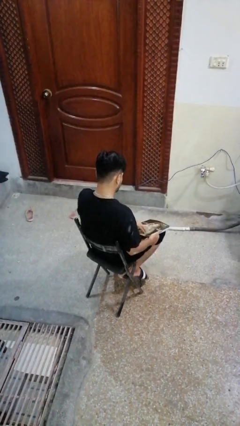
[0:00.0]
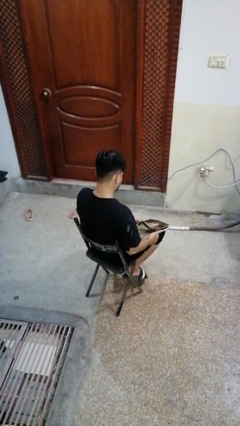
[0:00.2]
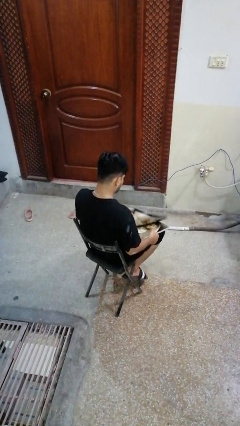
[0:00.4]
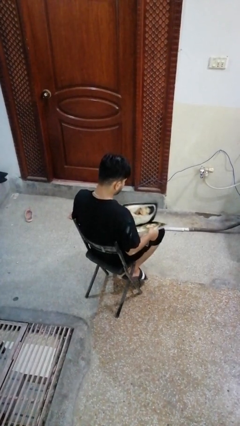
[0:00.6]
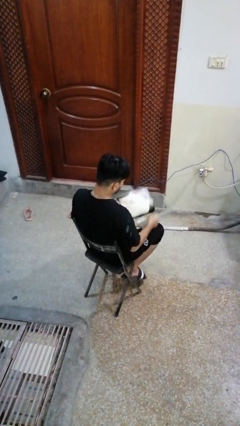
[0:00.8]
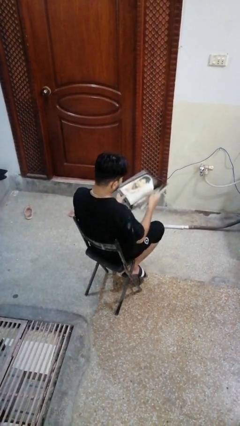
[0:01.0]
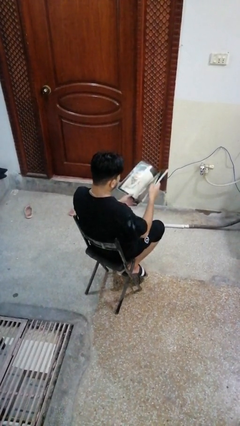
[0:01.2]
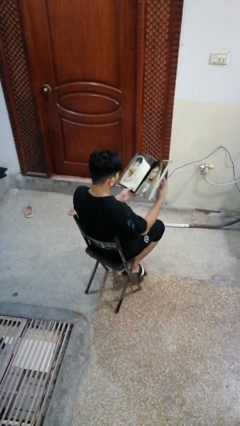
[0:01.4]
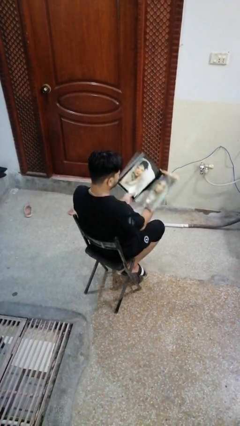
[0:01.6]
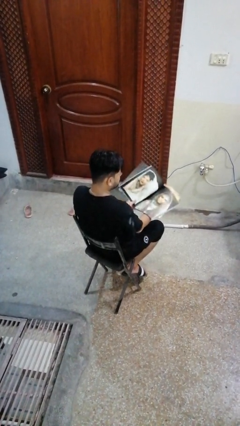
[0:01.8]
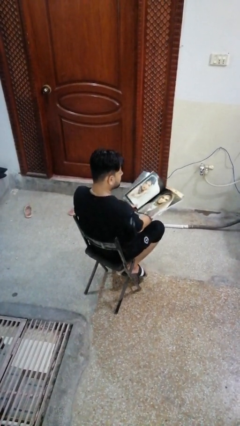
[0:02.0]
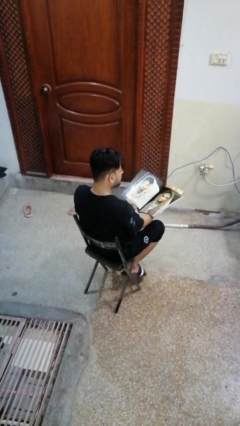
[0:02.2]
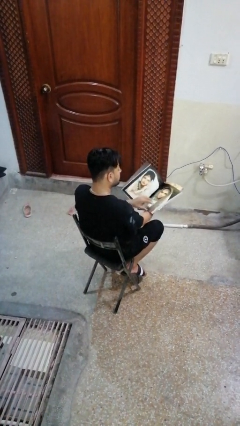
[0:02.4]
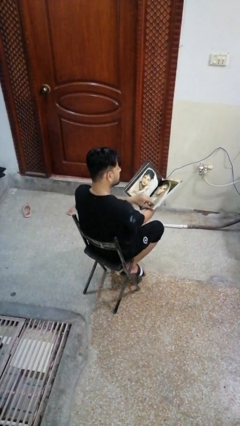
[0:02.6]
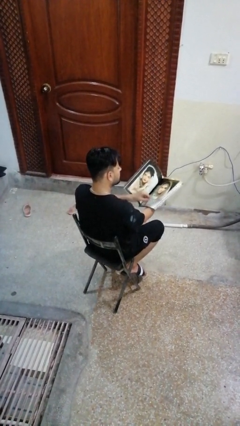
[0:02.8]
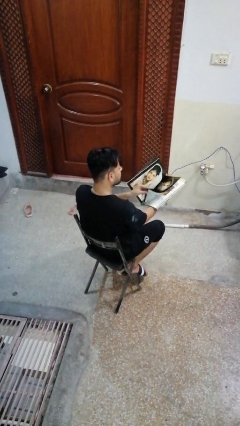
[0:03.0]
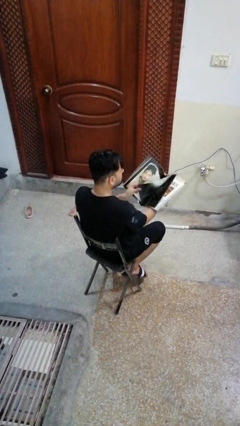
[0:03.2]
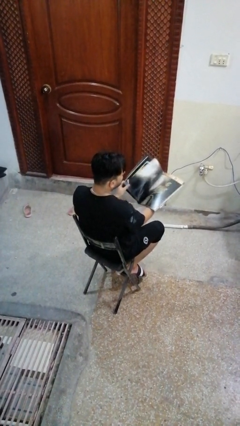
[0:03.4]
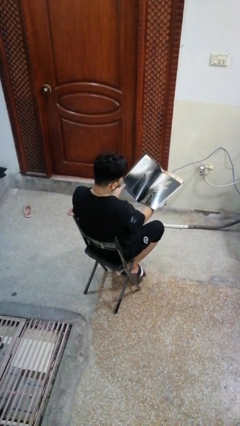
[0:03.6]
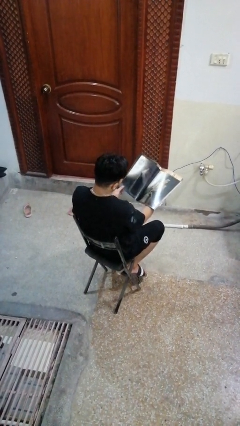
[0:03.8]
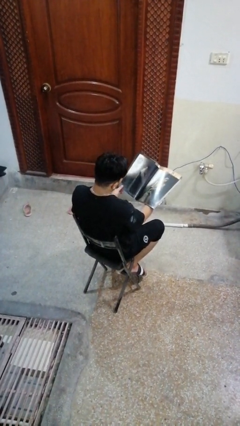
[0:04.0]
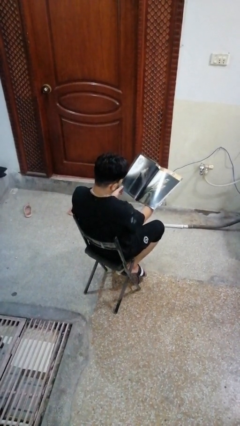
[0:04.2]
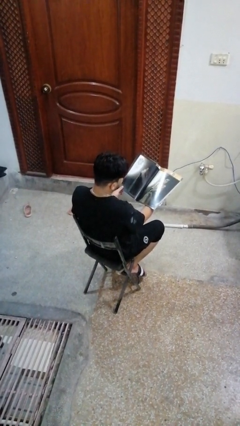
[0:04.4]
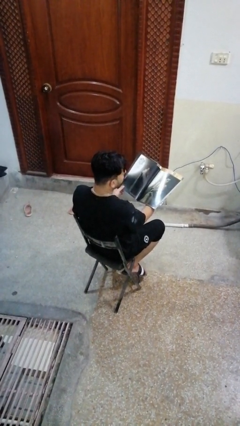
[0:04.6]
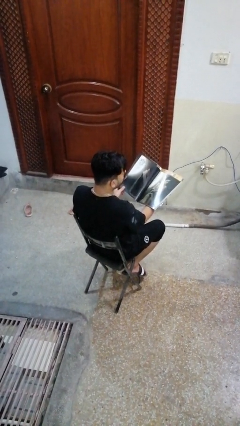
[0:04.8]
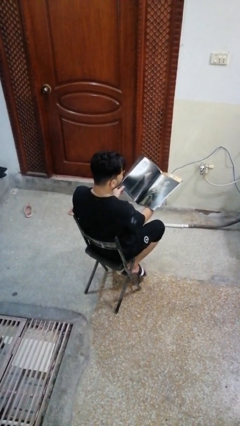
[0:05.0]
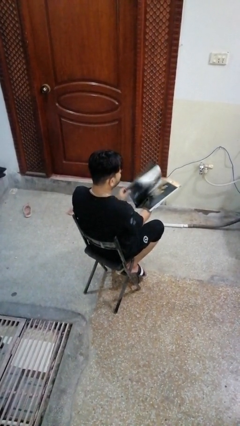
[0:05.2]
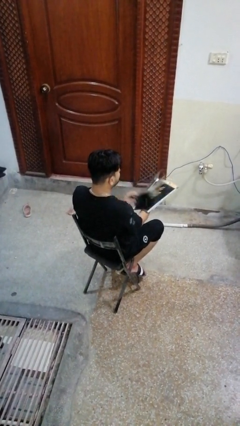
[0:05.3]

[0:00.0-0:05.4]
person reads magazine

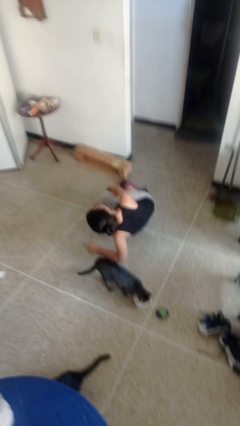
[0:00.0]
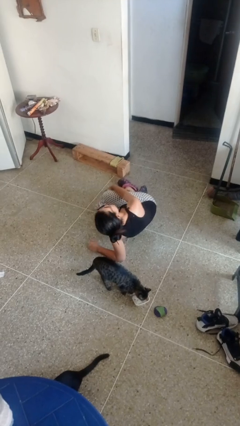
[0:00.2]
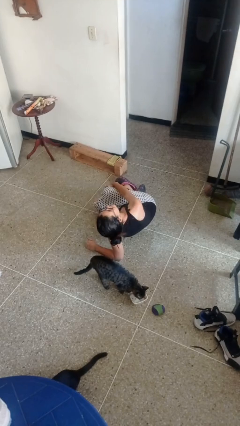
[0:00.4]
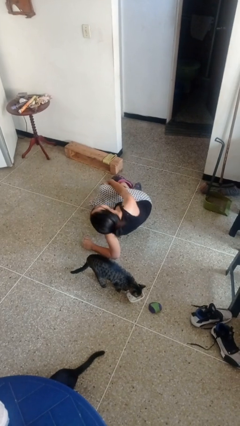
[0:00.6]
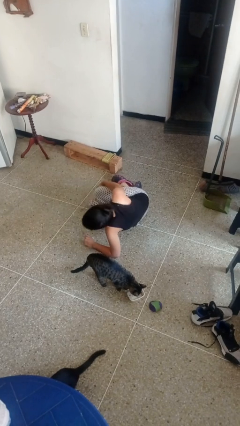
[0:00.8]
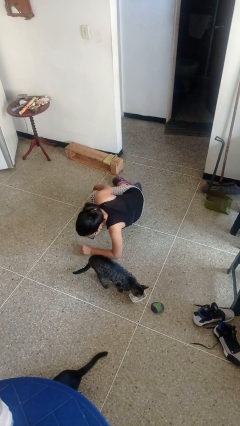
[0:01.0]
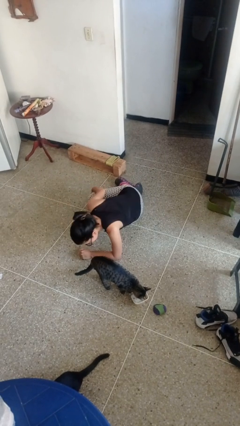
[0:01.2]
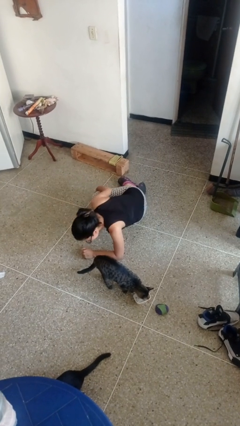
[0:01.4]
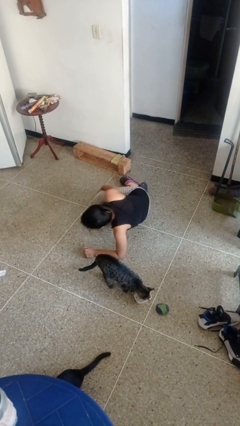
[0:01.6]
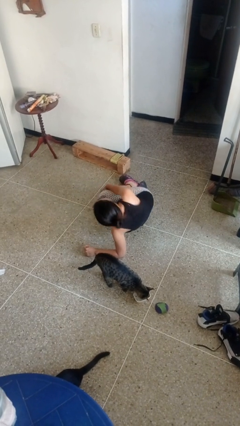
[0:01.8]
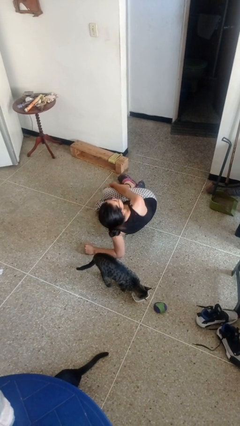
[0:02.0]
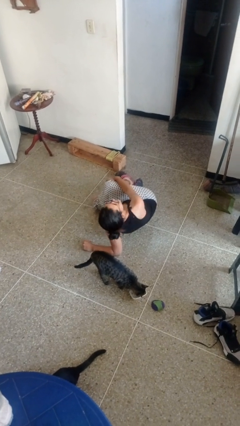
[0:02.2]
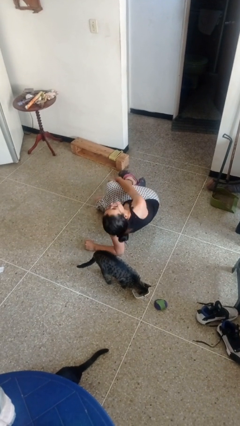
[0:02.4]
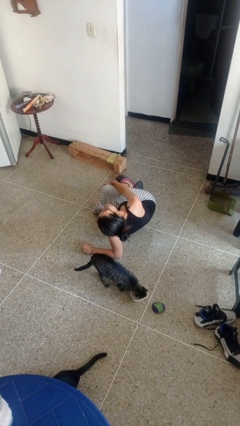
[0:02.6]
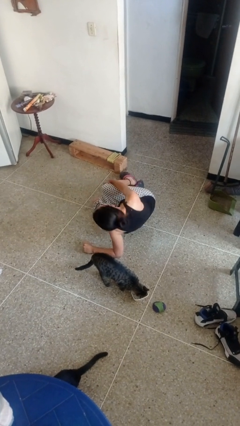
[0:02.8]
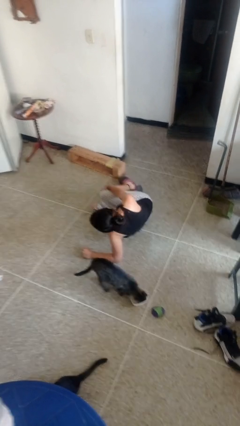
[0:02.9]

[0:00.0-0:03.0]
person lies down on floor

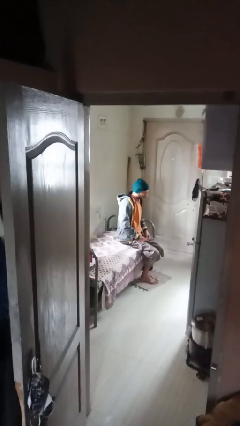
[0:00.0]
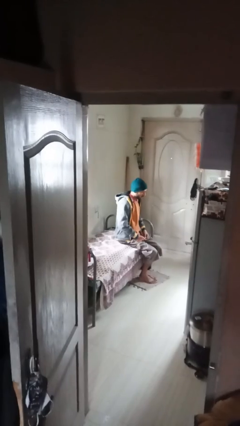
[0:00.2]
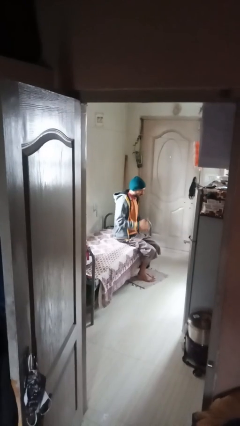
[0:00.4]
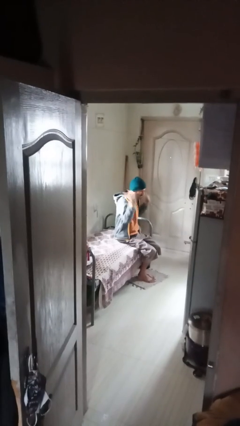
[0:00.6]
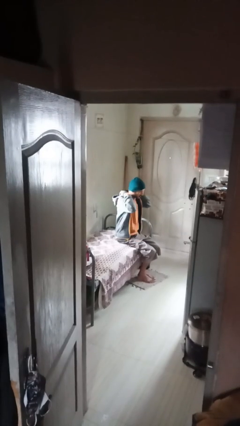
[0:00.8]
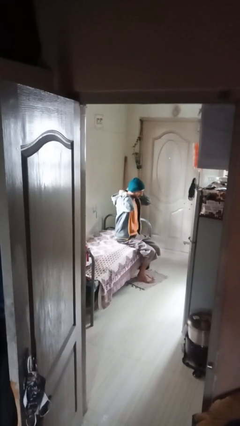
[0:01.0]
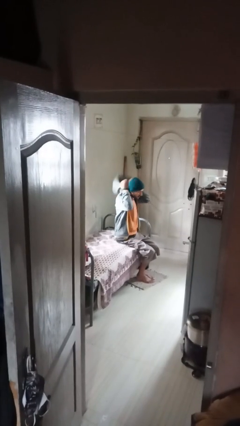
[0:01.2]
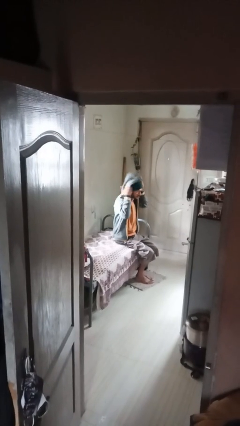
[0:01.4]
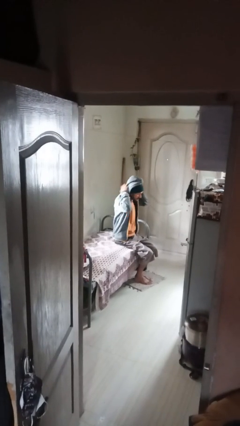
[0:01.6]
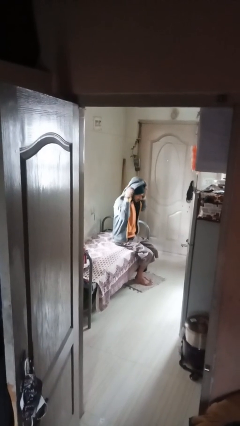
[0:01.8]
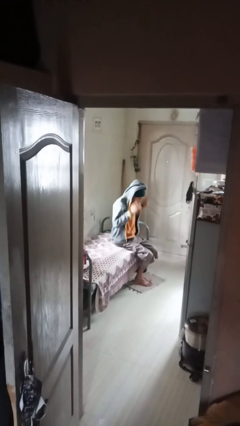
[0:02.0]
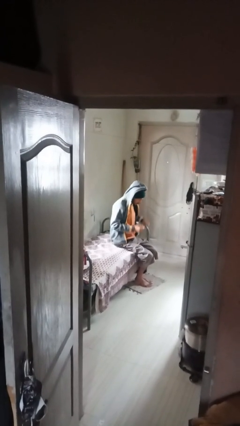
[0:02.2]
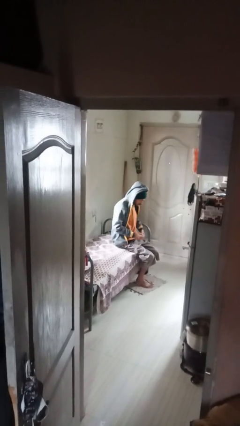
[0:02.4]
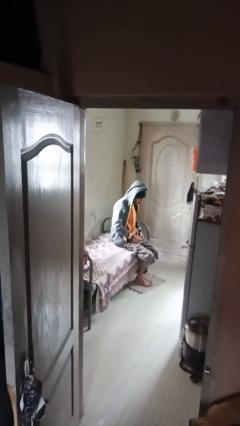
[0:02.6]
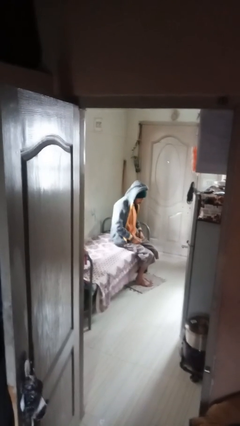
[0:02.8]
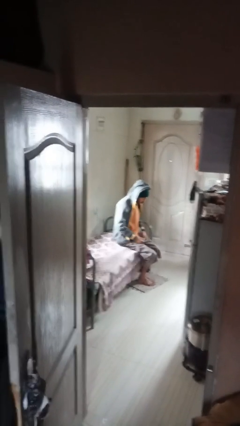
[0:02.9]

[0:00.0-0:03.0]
person puts on hoodie

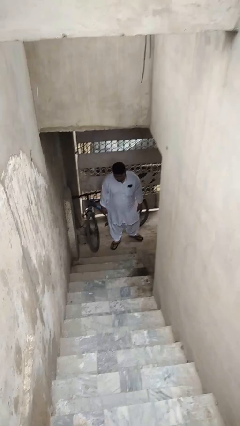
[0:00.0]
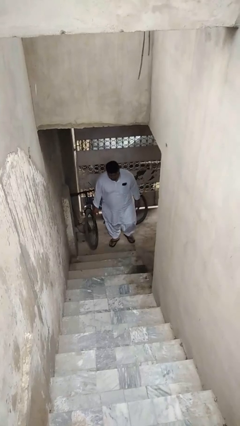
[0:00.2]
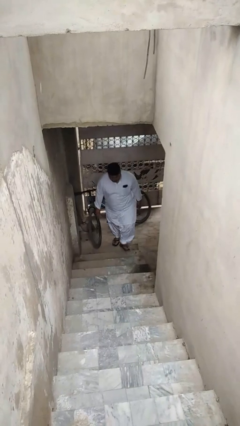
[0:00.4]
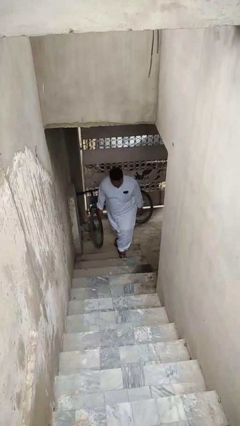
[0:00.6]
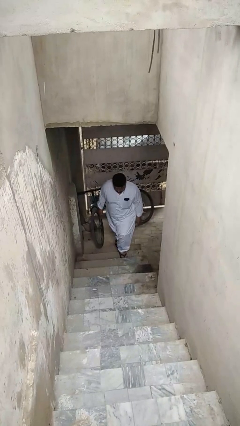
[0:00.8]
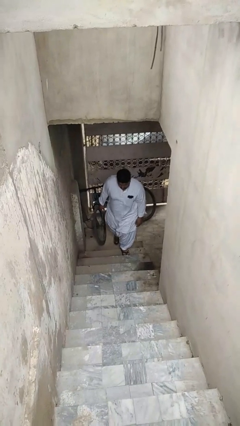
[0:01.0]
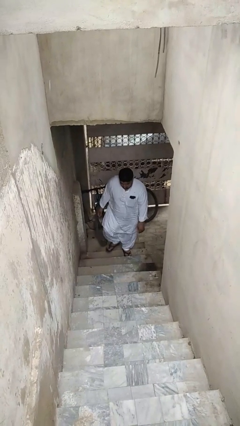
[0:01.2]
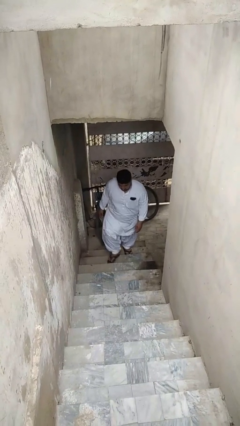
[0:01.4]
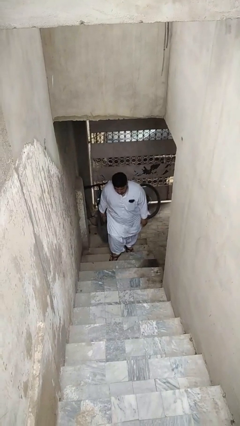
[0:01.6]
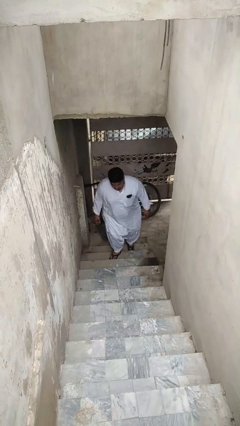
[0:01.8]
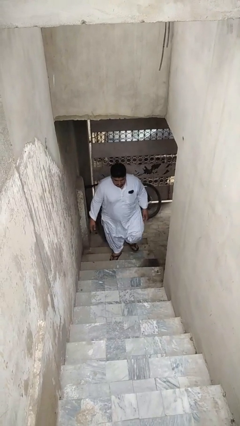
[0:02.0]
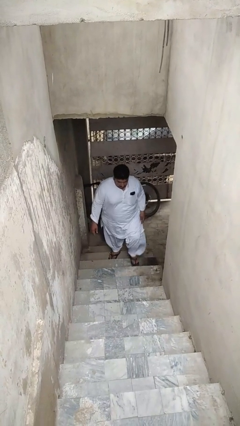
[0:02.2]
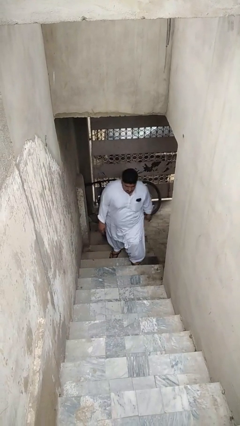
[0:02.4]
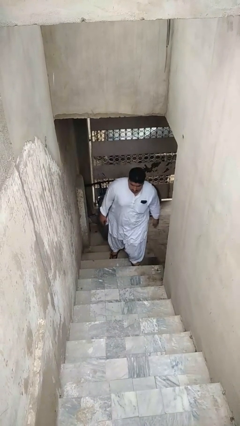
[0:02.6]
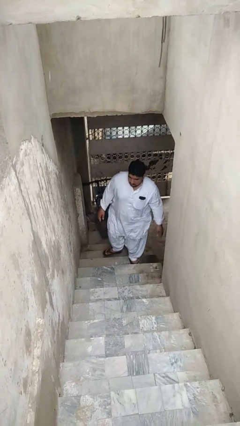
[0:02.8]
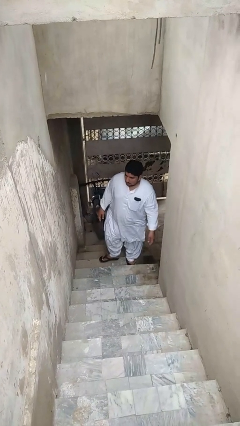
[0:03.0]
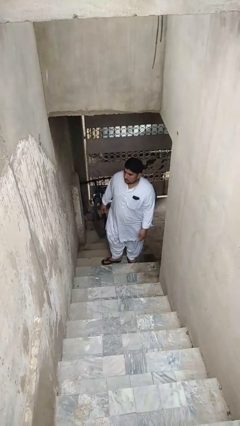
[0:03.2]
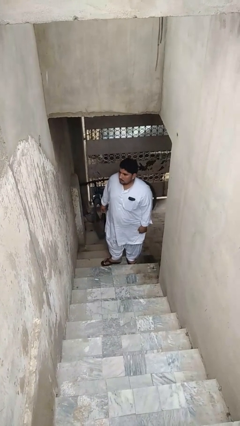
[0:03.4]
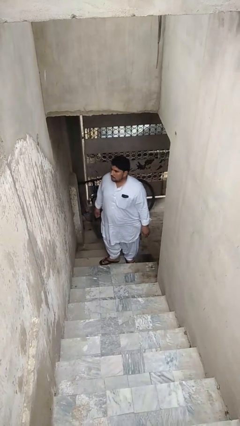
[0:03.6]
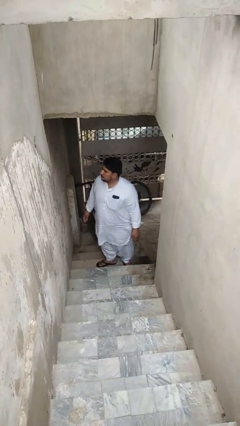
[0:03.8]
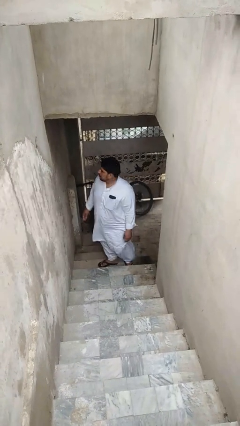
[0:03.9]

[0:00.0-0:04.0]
person climbs up stairs

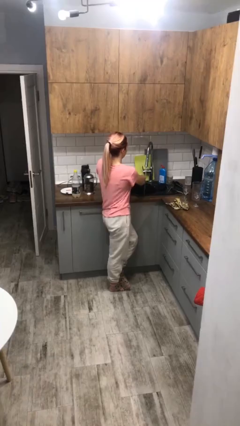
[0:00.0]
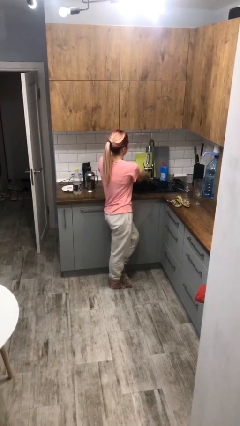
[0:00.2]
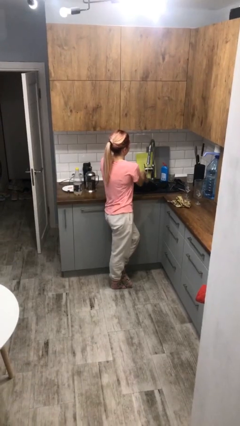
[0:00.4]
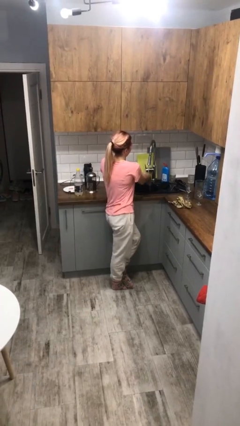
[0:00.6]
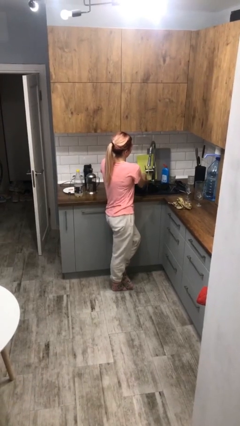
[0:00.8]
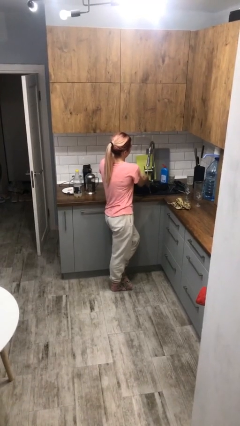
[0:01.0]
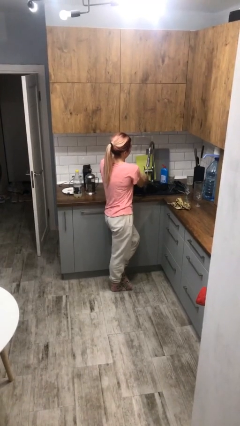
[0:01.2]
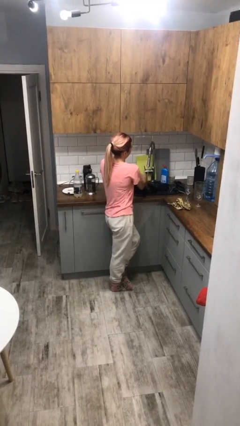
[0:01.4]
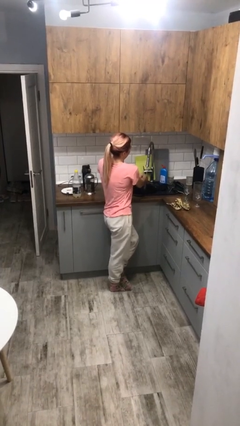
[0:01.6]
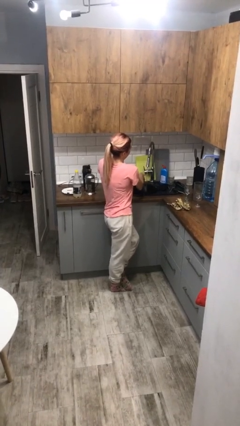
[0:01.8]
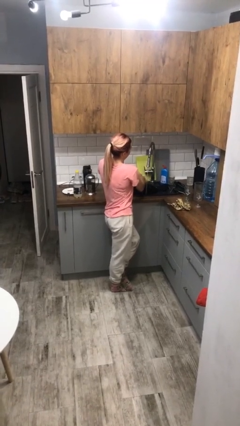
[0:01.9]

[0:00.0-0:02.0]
person washes hands
